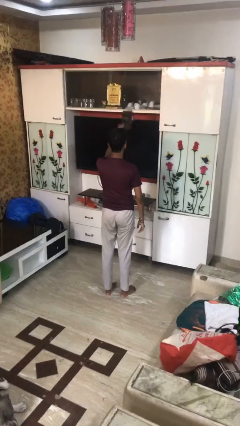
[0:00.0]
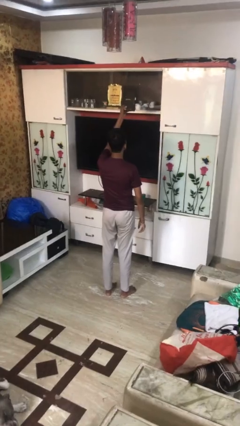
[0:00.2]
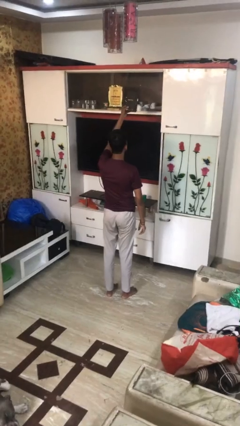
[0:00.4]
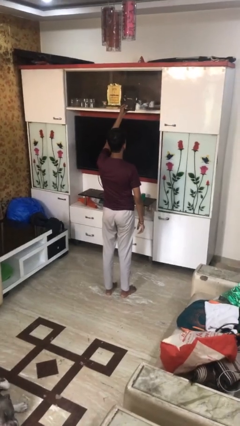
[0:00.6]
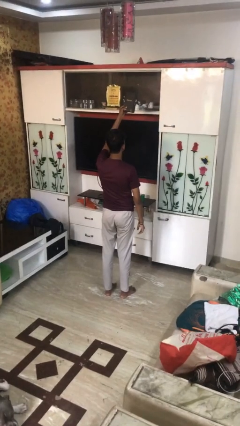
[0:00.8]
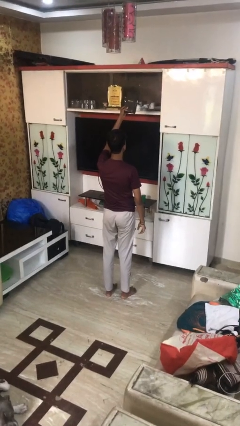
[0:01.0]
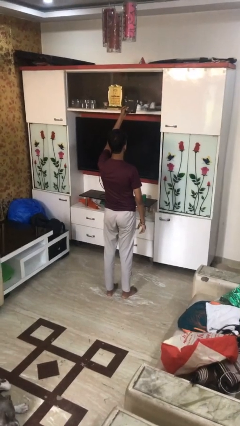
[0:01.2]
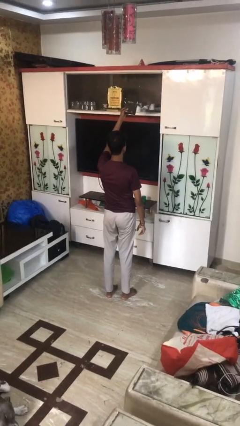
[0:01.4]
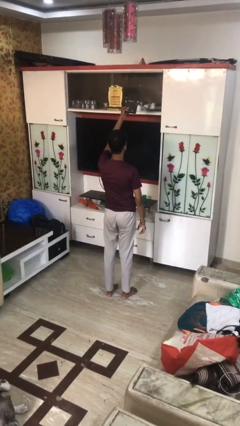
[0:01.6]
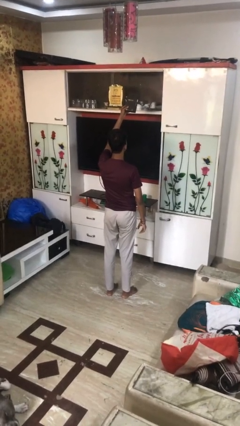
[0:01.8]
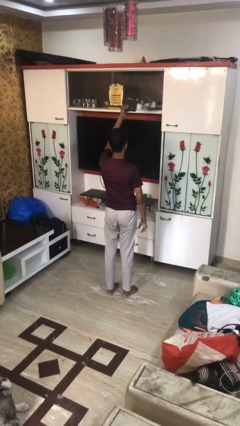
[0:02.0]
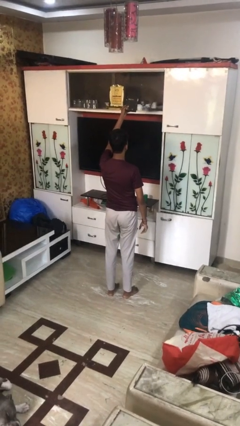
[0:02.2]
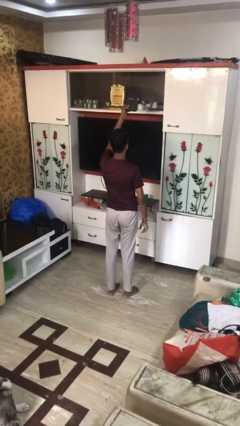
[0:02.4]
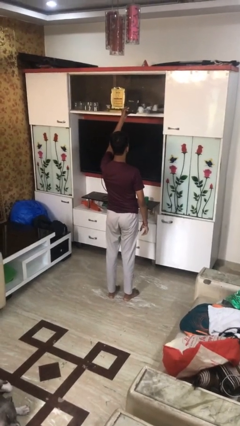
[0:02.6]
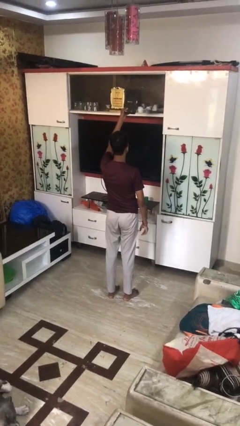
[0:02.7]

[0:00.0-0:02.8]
person holds object above head

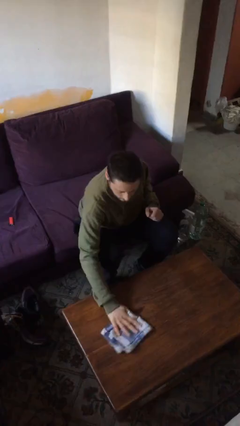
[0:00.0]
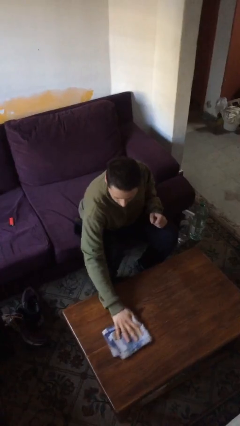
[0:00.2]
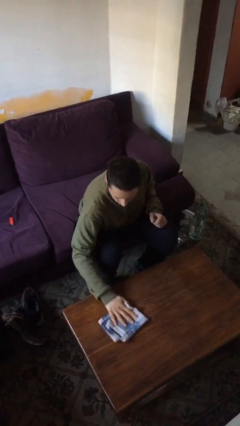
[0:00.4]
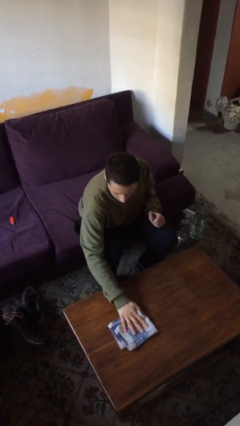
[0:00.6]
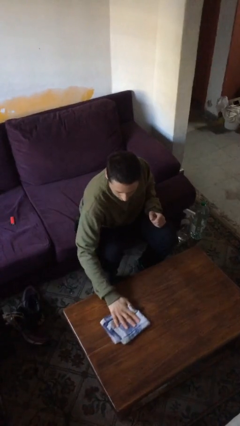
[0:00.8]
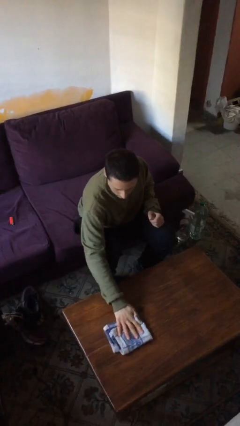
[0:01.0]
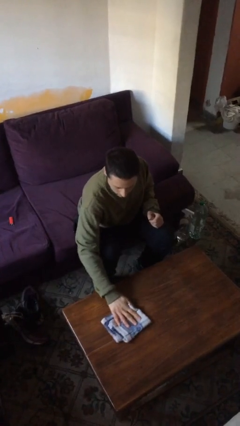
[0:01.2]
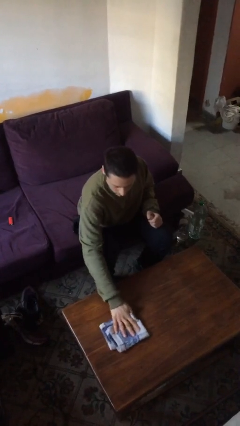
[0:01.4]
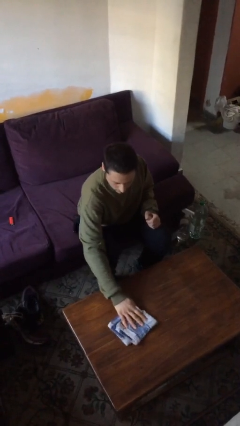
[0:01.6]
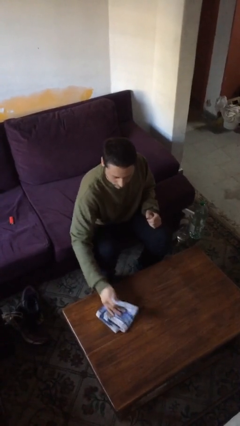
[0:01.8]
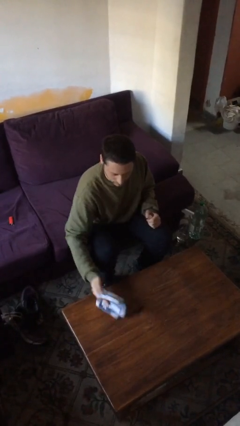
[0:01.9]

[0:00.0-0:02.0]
person cleans table with rag

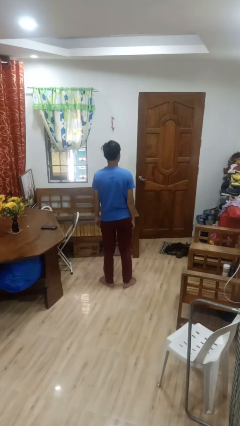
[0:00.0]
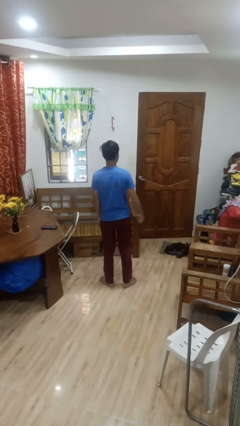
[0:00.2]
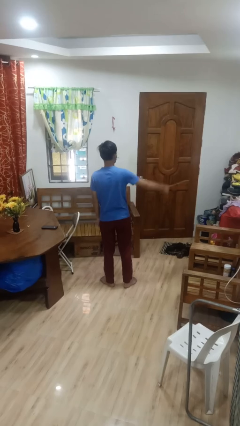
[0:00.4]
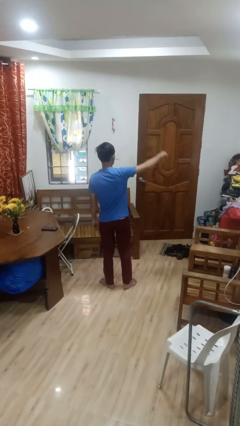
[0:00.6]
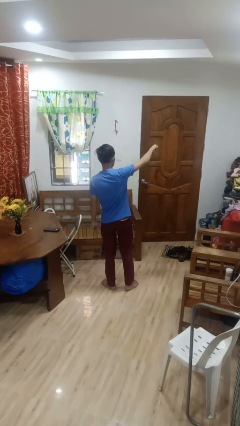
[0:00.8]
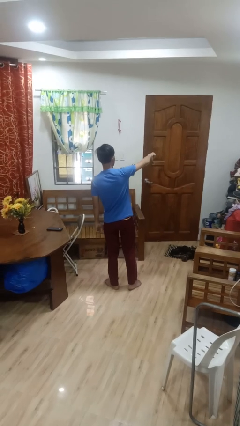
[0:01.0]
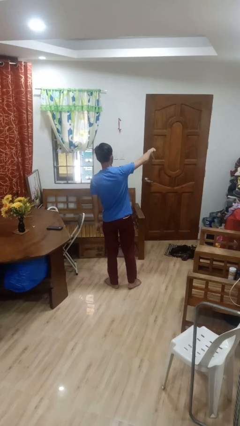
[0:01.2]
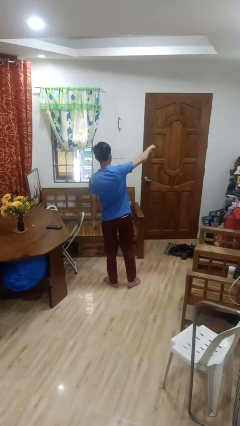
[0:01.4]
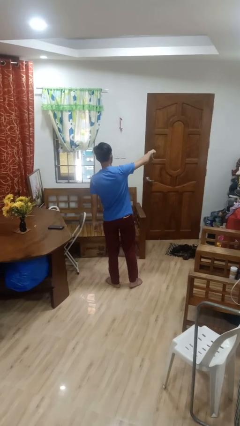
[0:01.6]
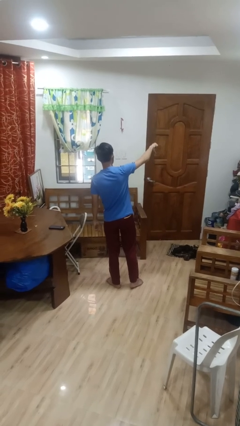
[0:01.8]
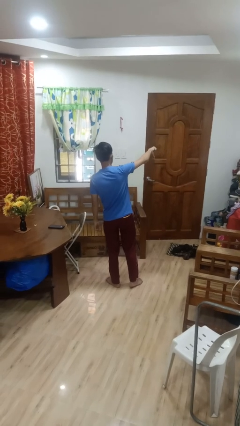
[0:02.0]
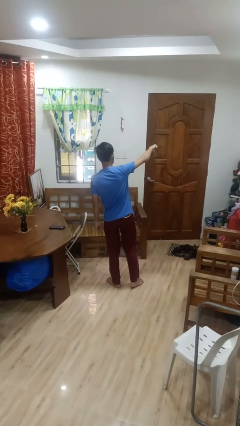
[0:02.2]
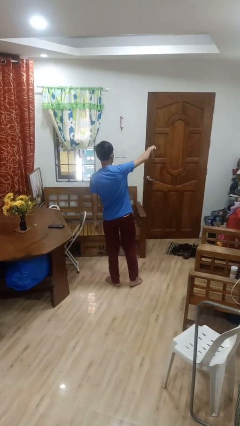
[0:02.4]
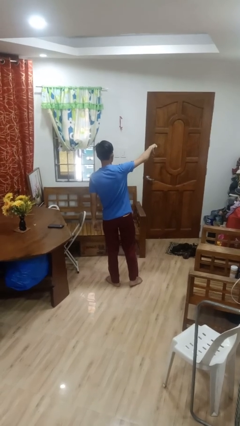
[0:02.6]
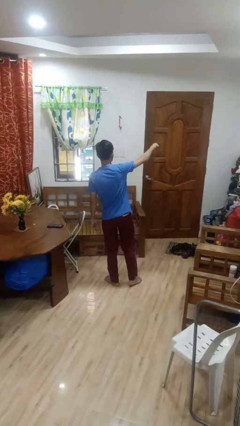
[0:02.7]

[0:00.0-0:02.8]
person gestures thumbs down

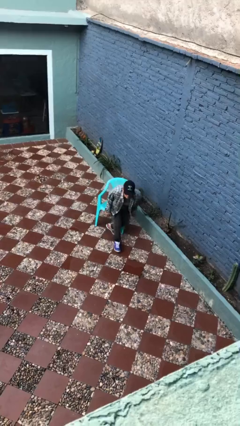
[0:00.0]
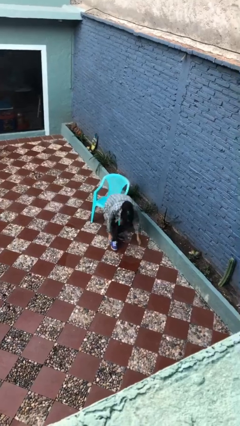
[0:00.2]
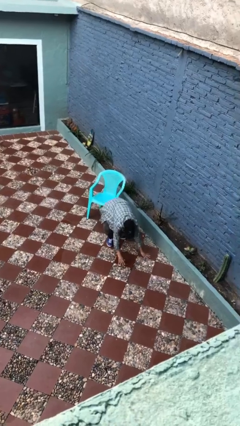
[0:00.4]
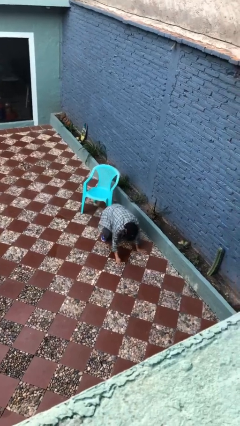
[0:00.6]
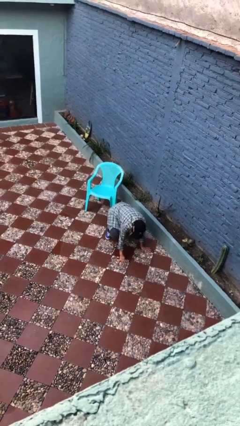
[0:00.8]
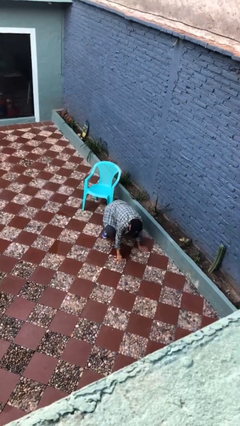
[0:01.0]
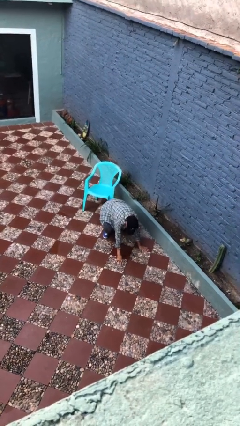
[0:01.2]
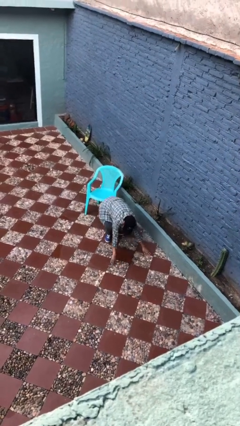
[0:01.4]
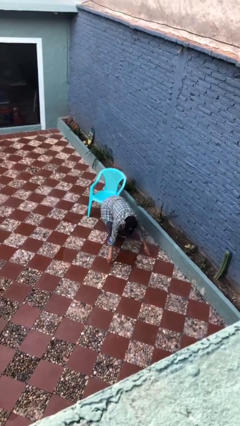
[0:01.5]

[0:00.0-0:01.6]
person falls from chair

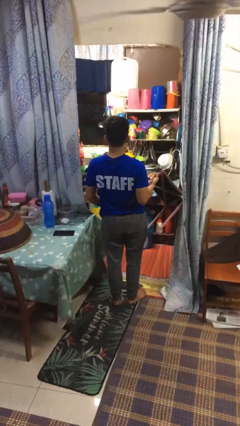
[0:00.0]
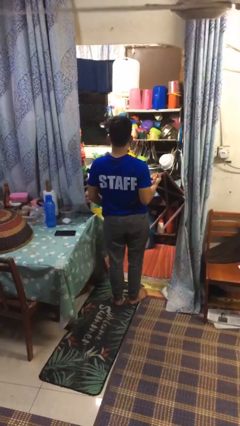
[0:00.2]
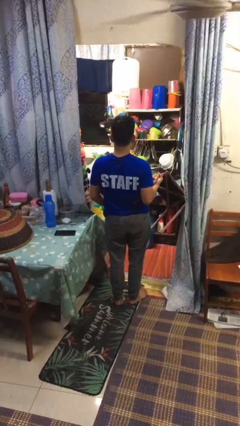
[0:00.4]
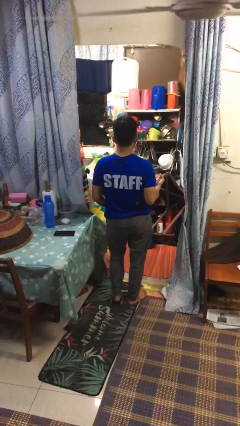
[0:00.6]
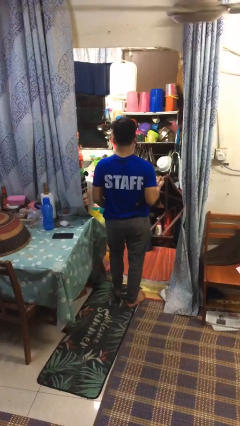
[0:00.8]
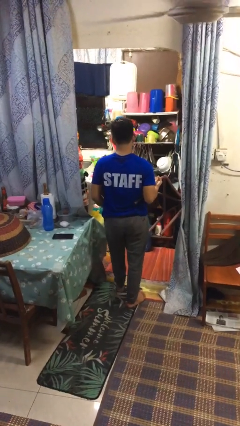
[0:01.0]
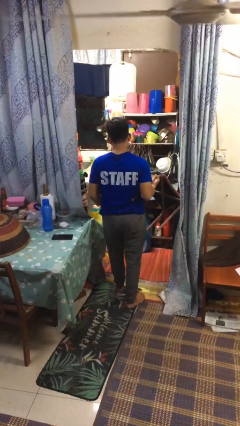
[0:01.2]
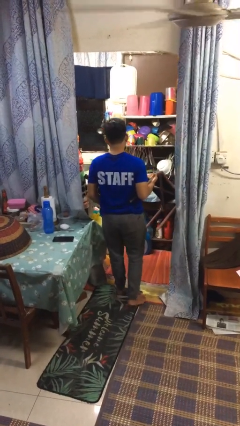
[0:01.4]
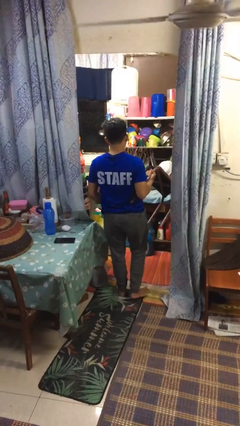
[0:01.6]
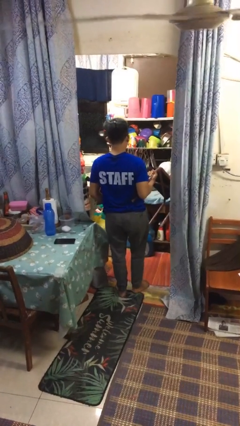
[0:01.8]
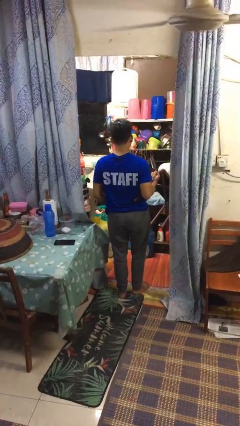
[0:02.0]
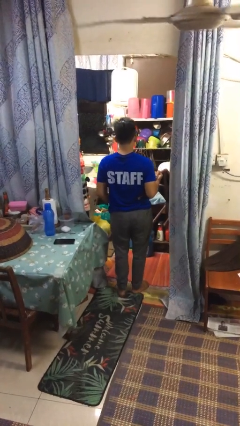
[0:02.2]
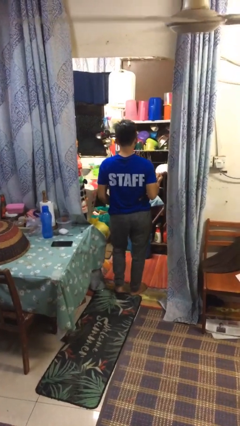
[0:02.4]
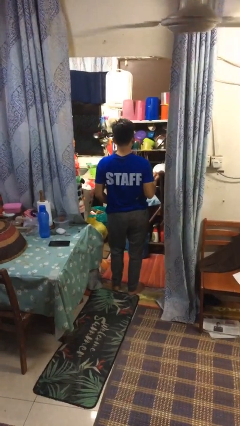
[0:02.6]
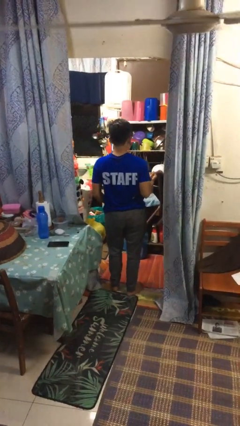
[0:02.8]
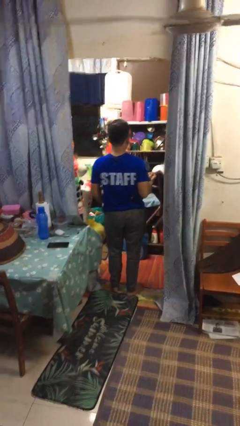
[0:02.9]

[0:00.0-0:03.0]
person carries furniture

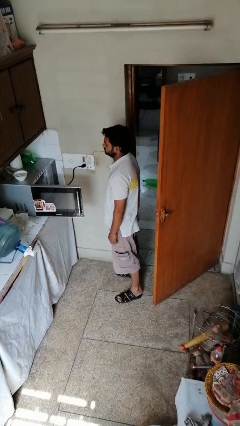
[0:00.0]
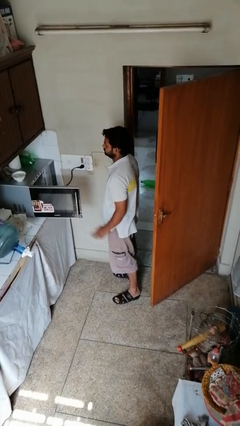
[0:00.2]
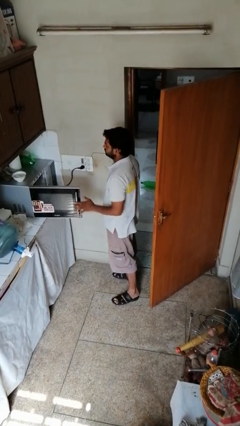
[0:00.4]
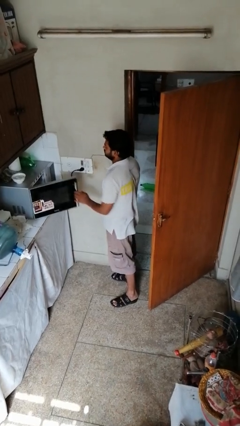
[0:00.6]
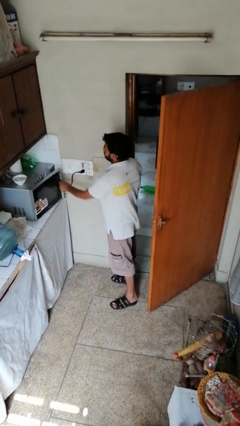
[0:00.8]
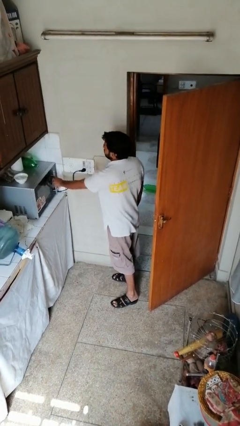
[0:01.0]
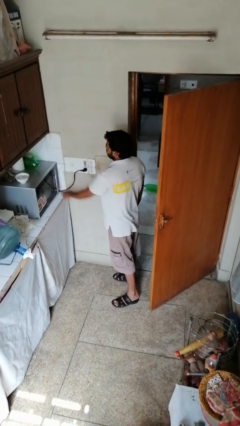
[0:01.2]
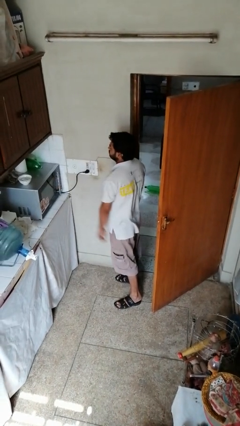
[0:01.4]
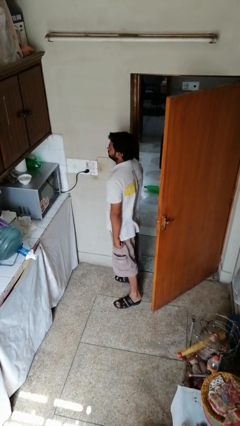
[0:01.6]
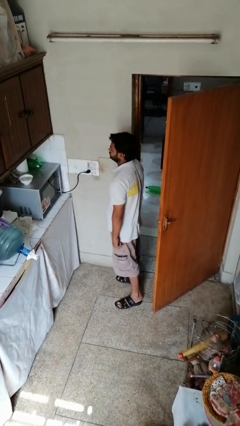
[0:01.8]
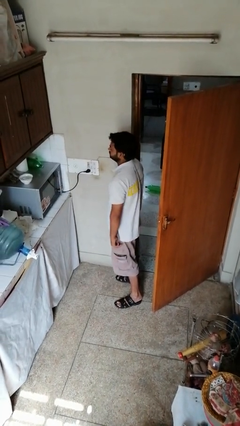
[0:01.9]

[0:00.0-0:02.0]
person closes microwave

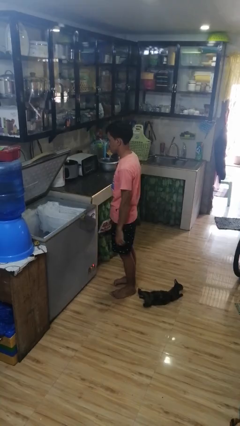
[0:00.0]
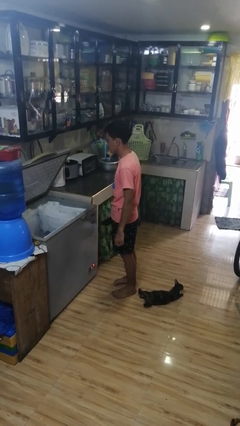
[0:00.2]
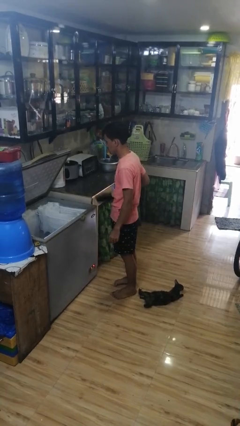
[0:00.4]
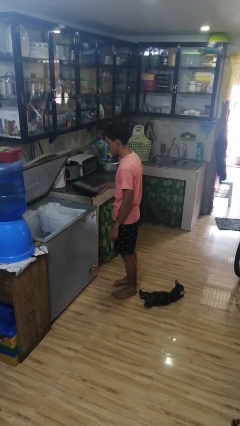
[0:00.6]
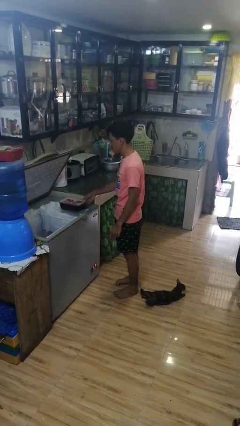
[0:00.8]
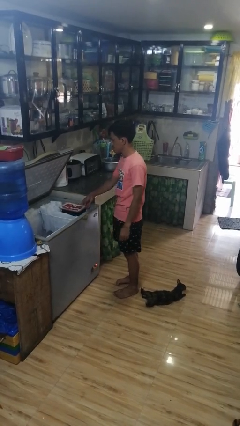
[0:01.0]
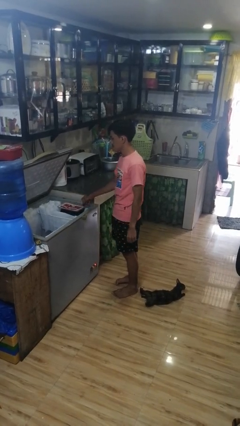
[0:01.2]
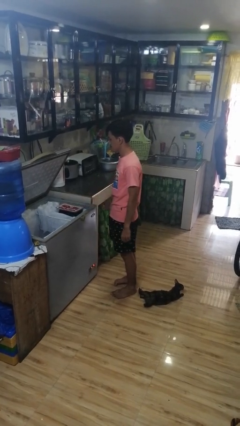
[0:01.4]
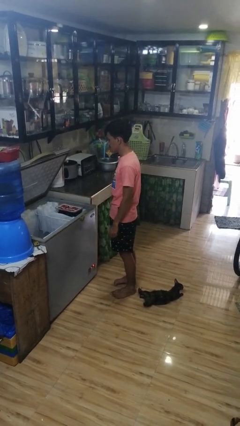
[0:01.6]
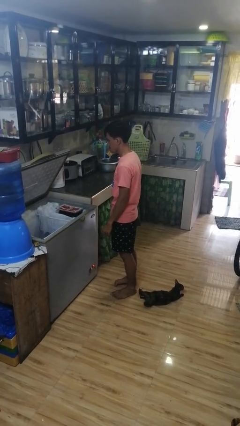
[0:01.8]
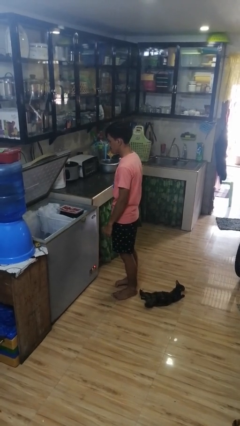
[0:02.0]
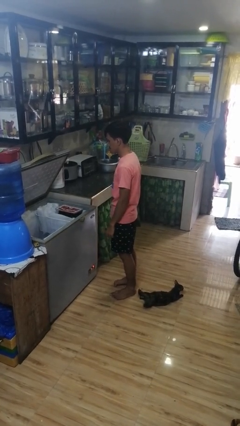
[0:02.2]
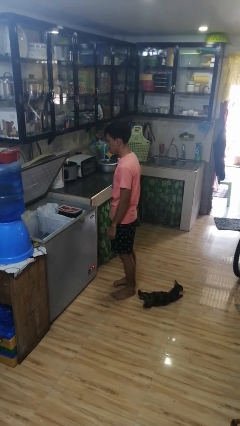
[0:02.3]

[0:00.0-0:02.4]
person puts object into refrigerator

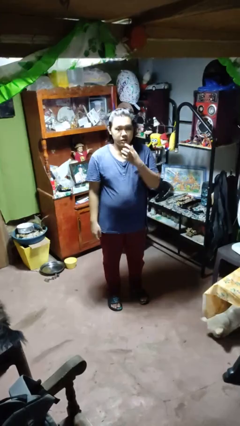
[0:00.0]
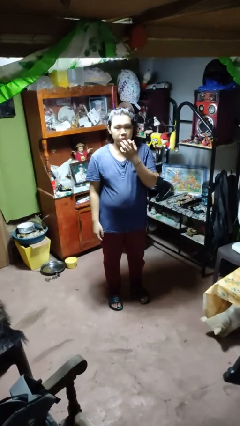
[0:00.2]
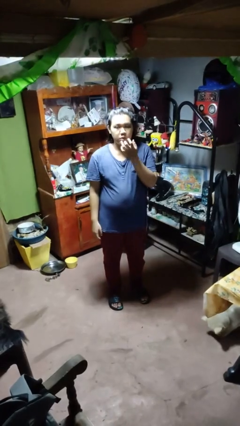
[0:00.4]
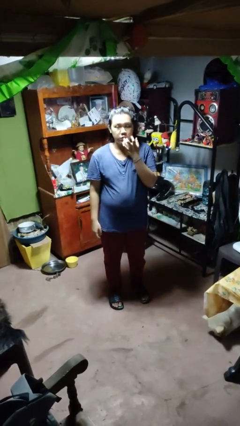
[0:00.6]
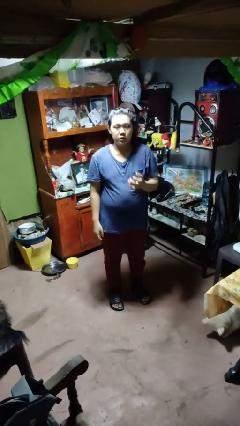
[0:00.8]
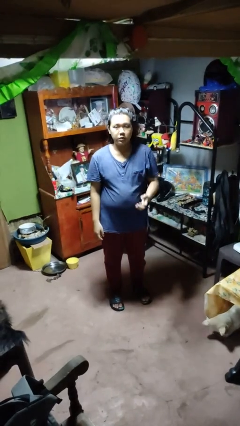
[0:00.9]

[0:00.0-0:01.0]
person licks fingers
